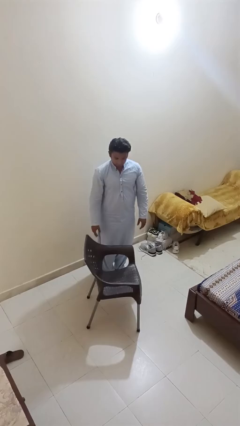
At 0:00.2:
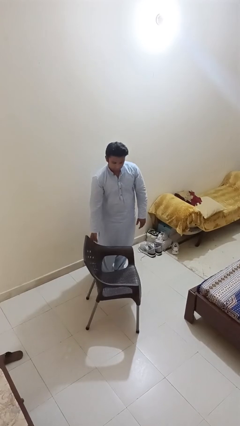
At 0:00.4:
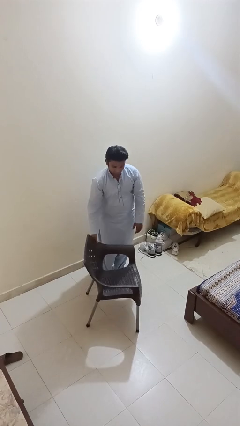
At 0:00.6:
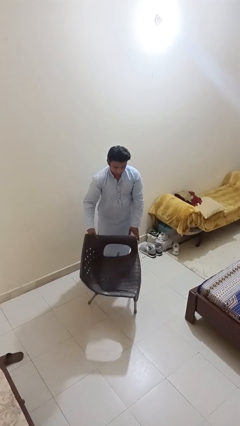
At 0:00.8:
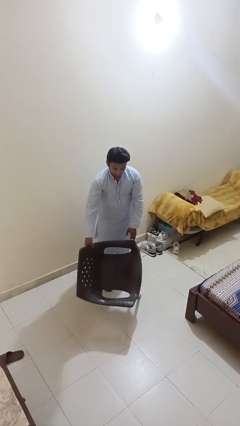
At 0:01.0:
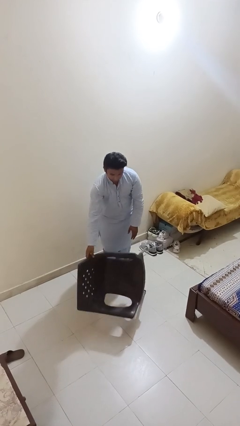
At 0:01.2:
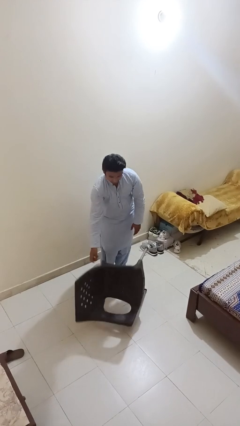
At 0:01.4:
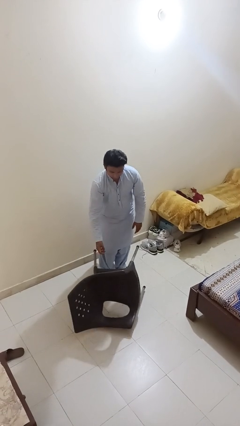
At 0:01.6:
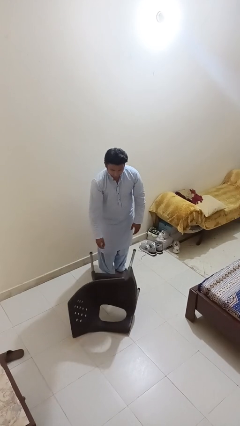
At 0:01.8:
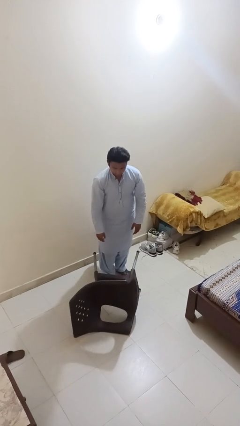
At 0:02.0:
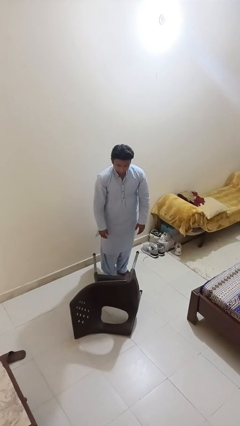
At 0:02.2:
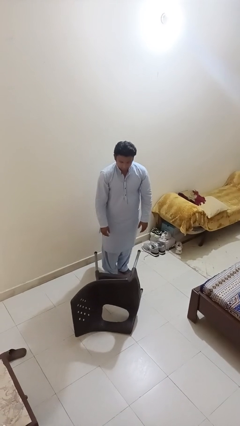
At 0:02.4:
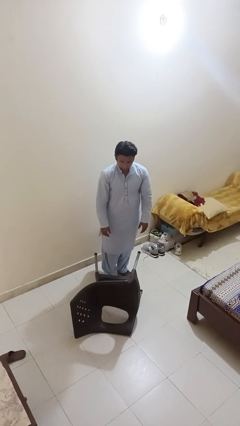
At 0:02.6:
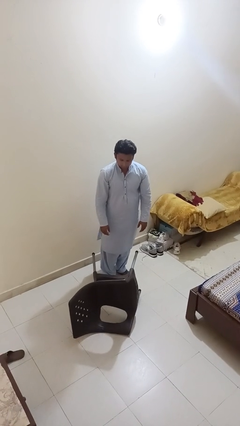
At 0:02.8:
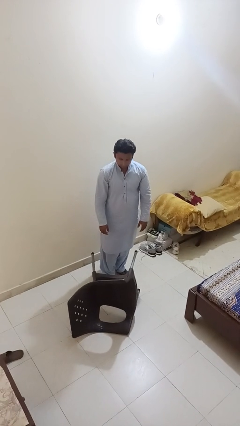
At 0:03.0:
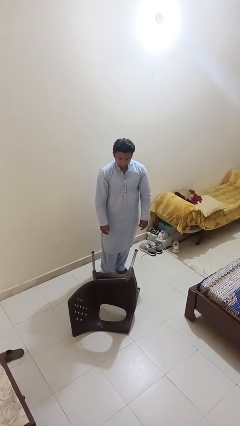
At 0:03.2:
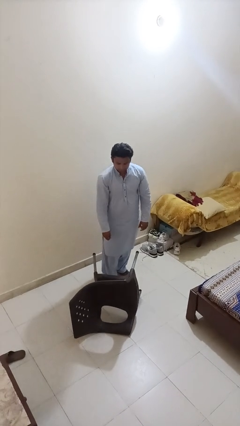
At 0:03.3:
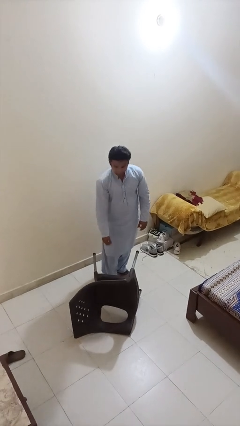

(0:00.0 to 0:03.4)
person knocks over furniture

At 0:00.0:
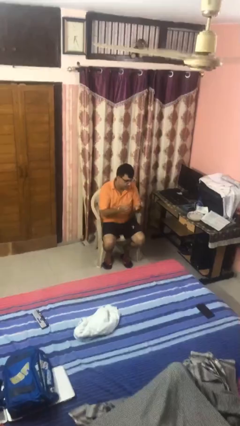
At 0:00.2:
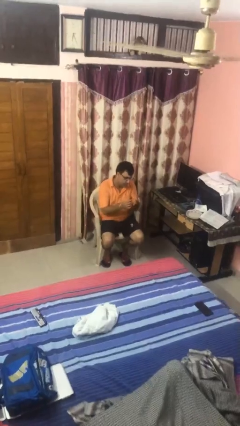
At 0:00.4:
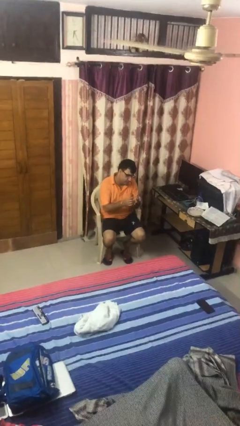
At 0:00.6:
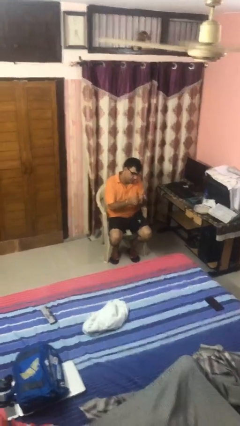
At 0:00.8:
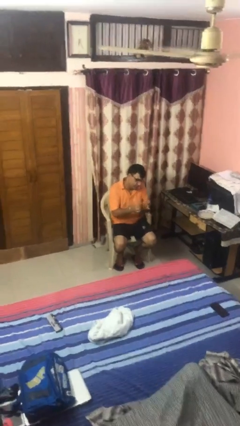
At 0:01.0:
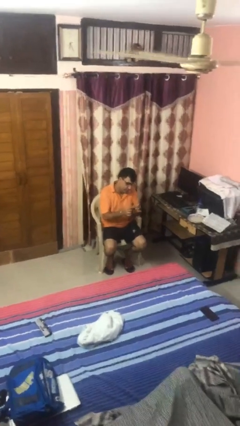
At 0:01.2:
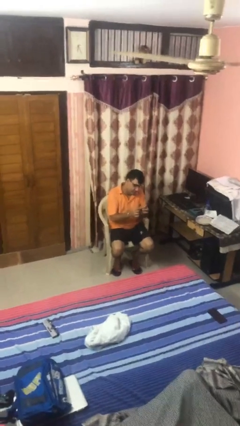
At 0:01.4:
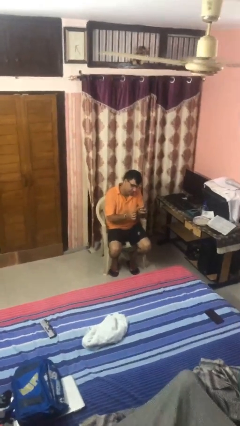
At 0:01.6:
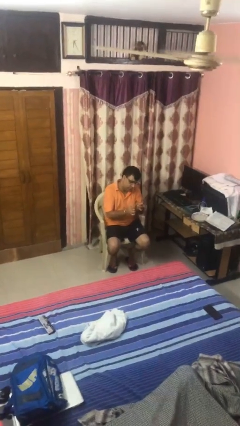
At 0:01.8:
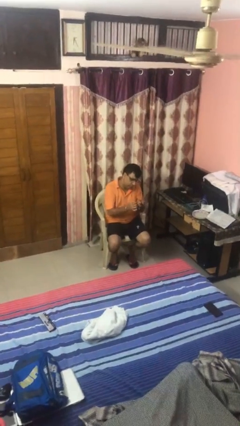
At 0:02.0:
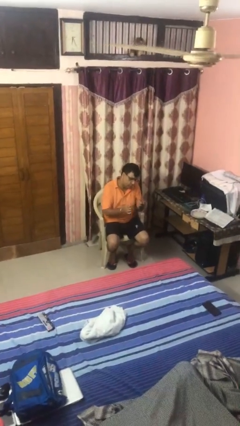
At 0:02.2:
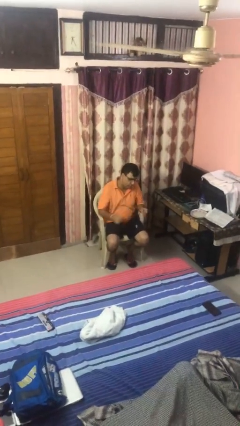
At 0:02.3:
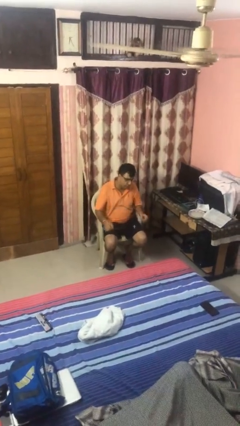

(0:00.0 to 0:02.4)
person files fingernails

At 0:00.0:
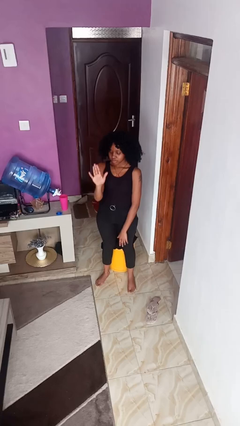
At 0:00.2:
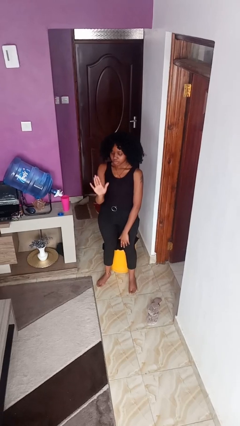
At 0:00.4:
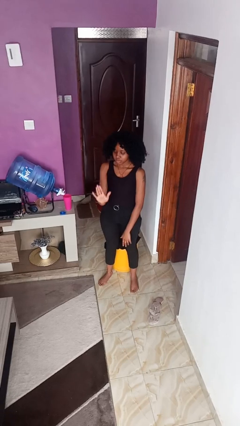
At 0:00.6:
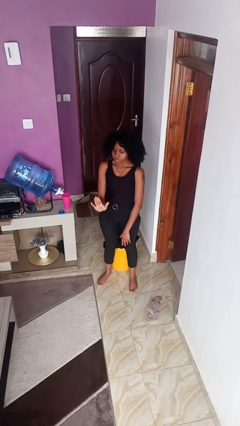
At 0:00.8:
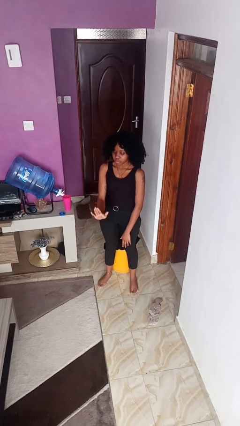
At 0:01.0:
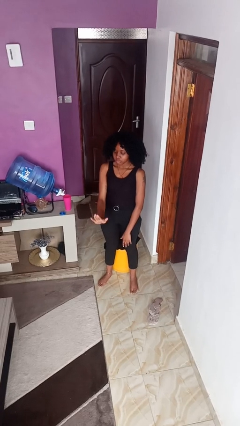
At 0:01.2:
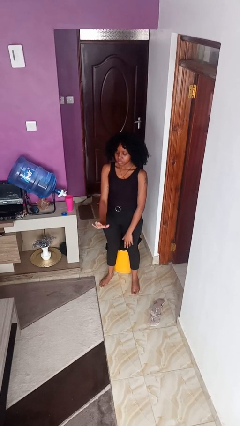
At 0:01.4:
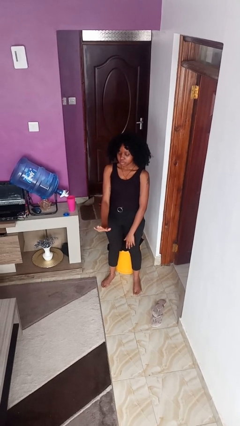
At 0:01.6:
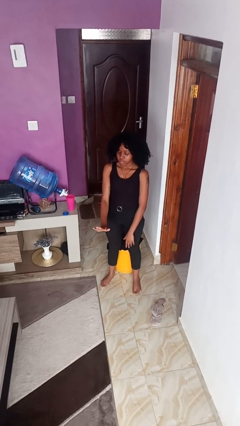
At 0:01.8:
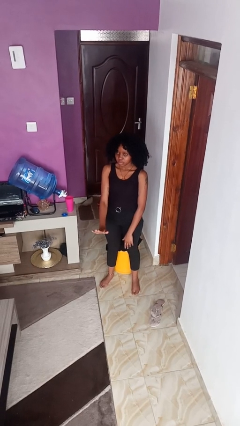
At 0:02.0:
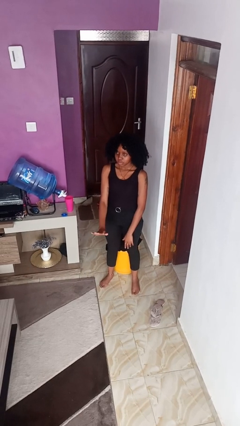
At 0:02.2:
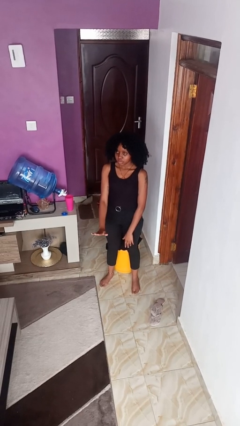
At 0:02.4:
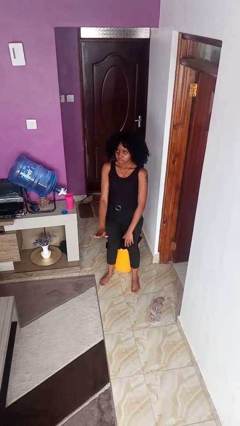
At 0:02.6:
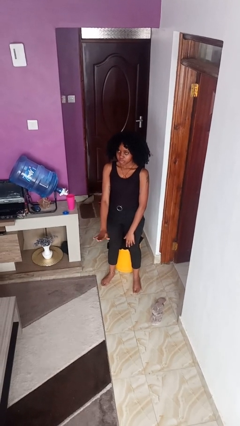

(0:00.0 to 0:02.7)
person gestures swipe down

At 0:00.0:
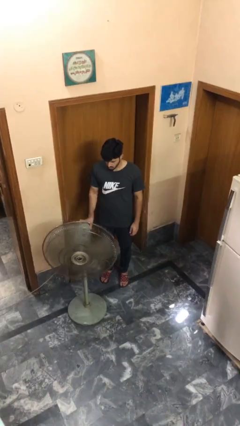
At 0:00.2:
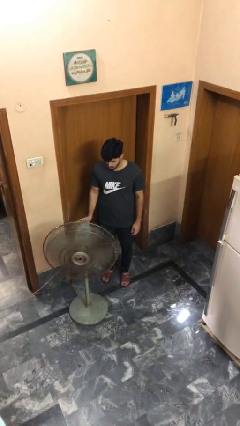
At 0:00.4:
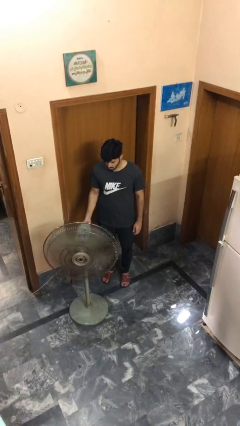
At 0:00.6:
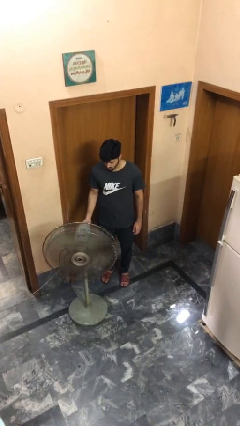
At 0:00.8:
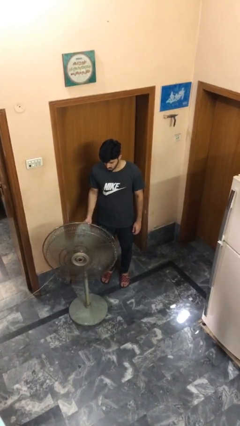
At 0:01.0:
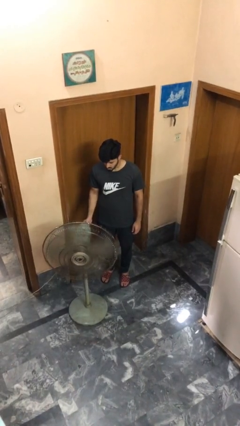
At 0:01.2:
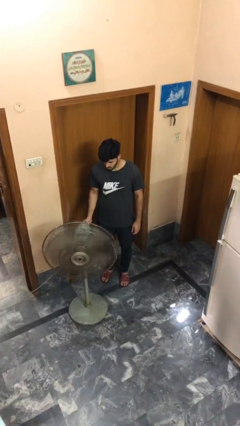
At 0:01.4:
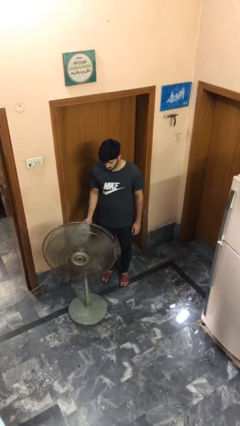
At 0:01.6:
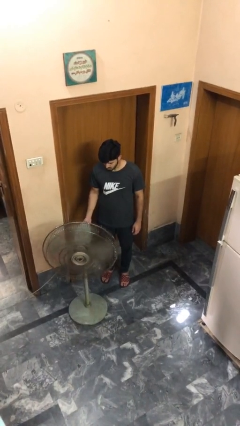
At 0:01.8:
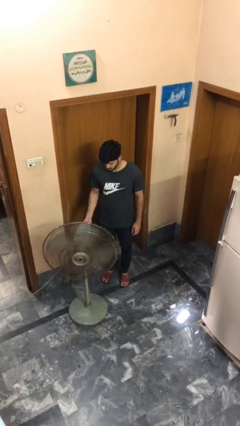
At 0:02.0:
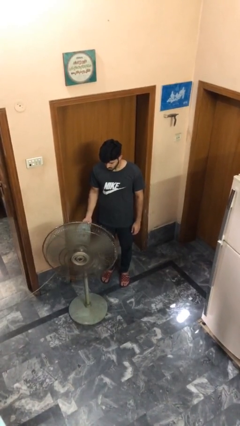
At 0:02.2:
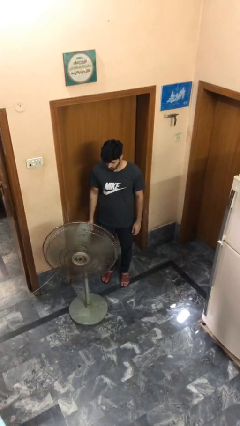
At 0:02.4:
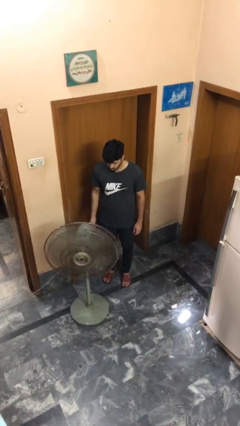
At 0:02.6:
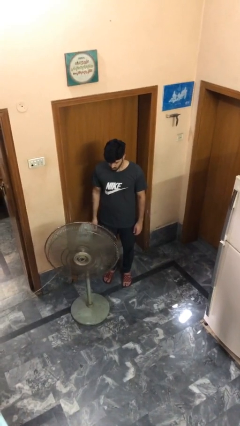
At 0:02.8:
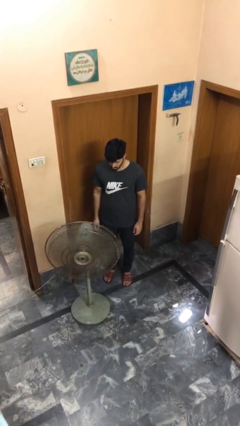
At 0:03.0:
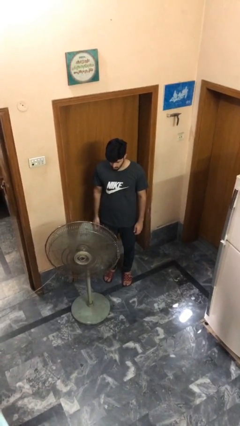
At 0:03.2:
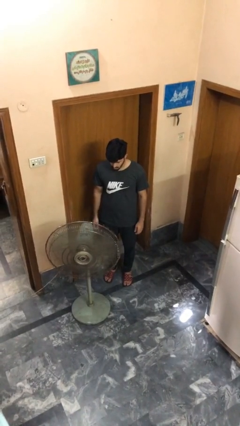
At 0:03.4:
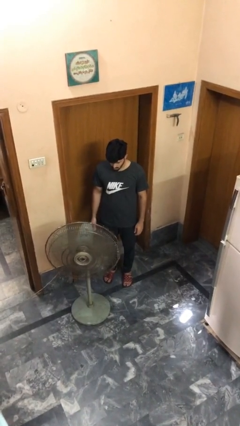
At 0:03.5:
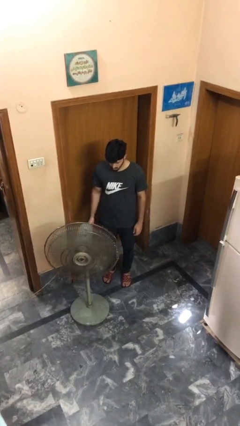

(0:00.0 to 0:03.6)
person turns on fan

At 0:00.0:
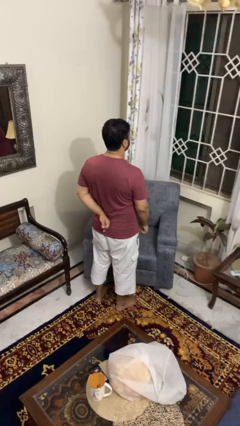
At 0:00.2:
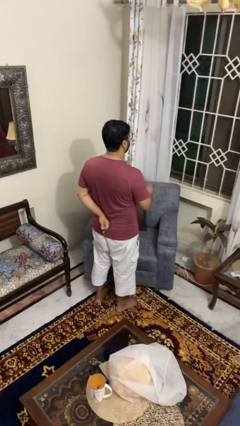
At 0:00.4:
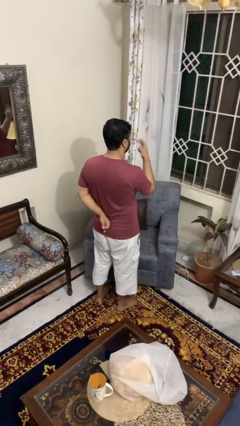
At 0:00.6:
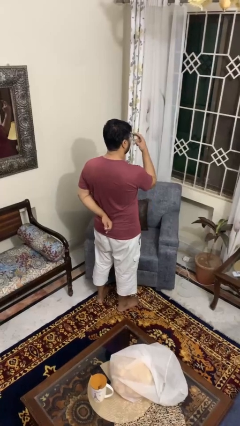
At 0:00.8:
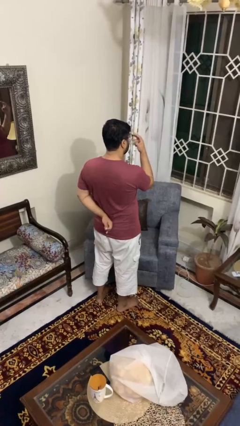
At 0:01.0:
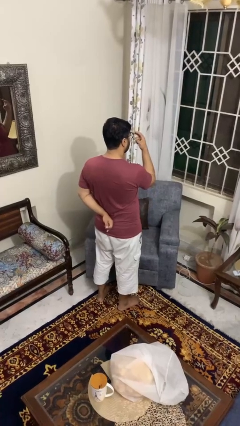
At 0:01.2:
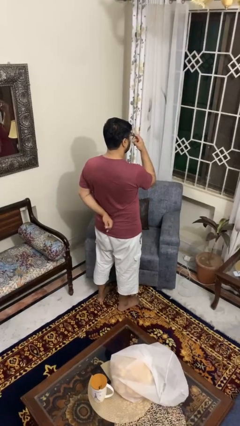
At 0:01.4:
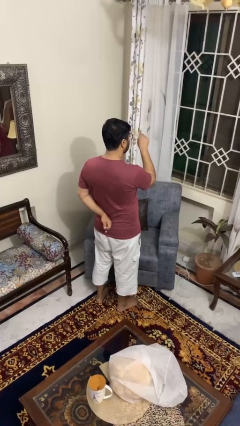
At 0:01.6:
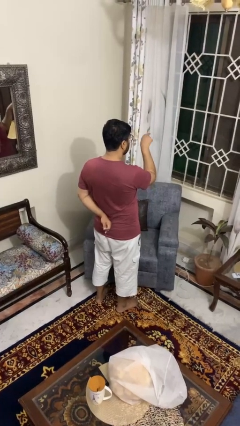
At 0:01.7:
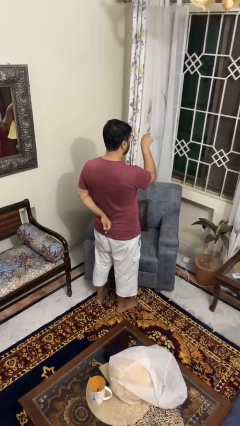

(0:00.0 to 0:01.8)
person gestures watch closely

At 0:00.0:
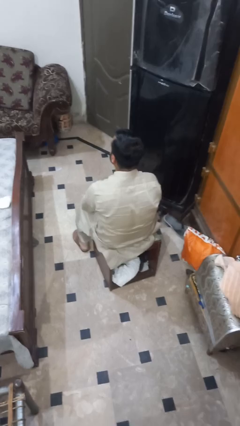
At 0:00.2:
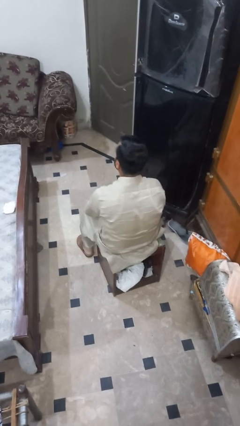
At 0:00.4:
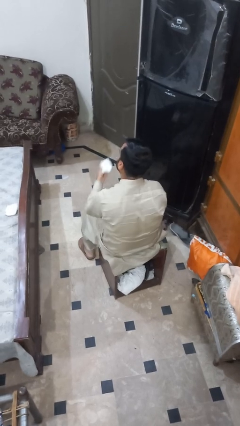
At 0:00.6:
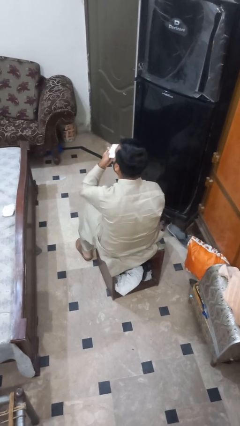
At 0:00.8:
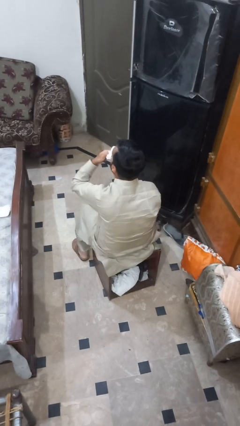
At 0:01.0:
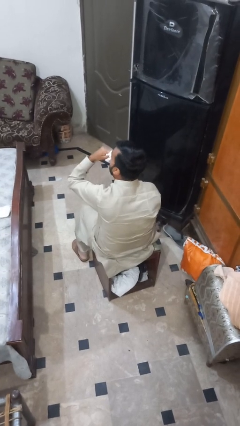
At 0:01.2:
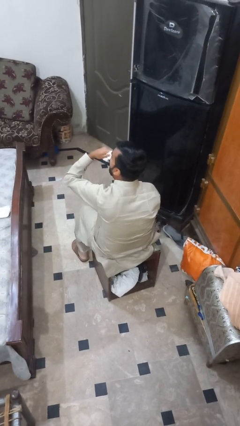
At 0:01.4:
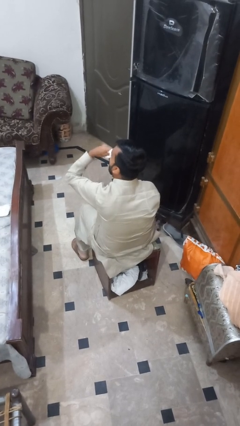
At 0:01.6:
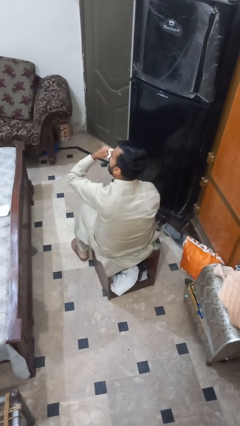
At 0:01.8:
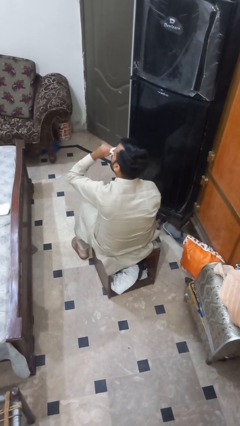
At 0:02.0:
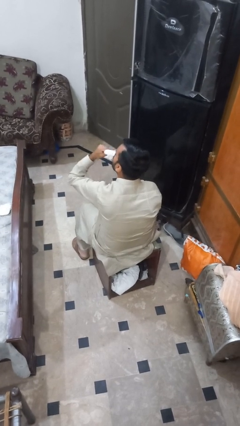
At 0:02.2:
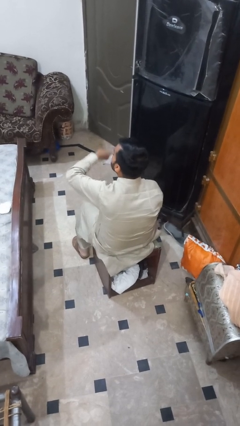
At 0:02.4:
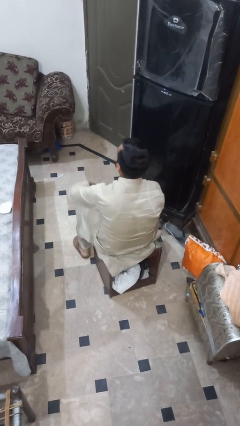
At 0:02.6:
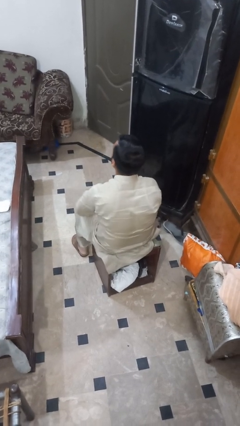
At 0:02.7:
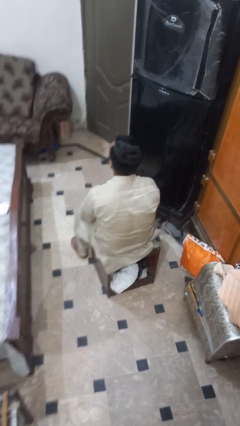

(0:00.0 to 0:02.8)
person blows nose

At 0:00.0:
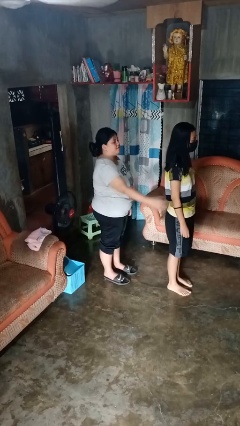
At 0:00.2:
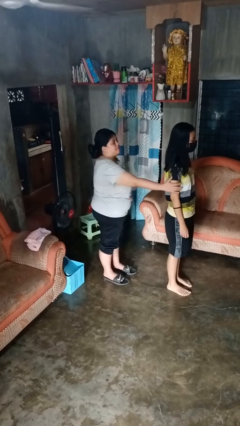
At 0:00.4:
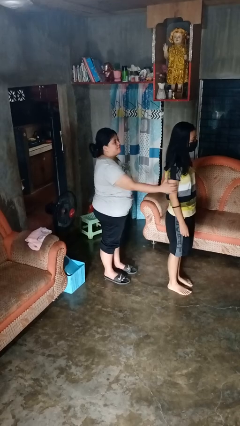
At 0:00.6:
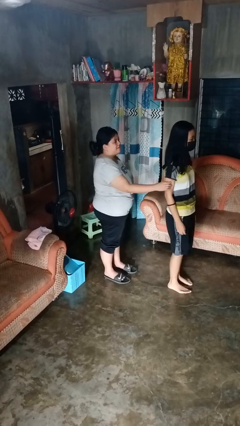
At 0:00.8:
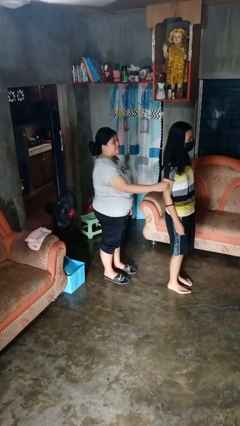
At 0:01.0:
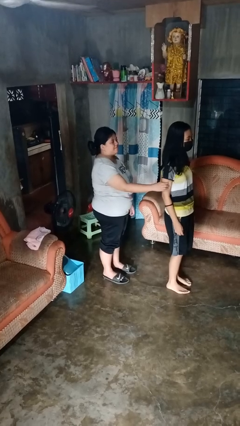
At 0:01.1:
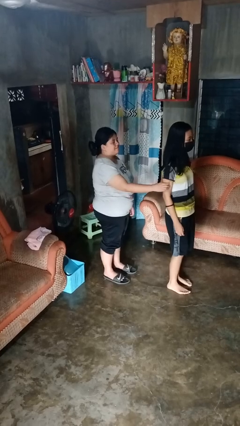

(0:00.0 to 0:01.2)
person grabs person by shoulder
